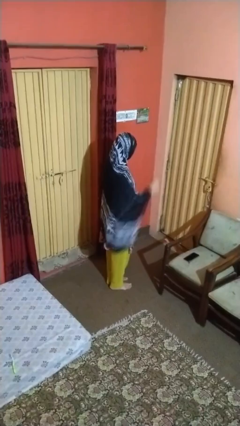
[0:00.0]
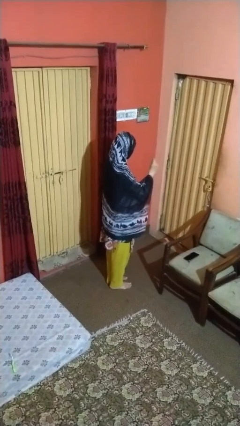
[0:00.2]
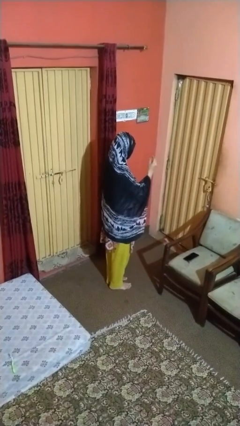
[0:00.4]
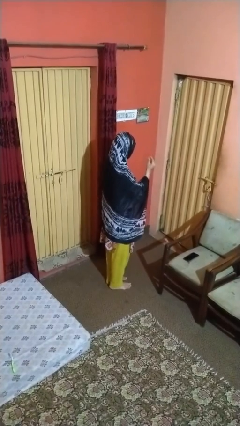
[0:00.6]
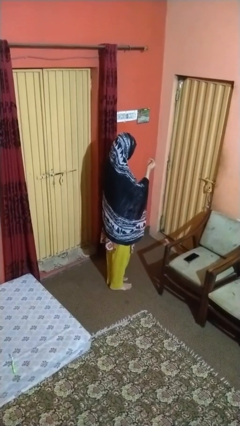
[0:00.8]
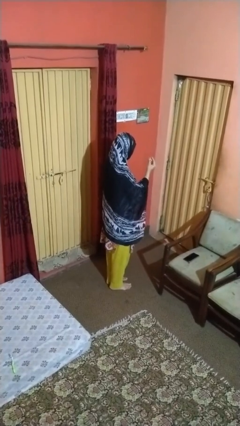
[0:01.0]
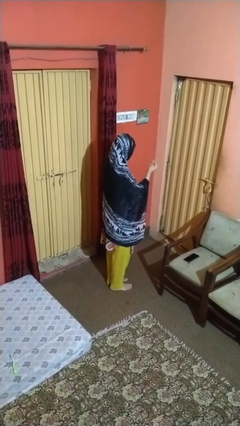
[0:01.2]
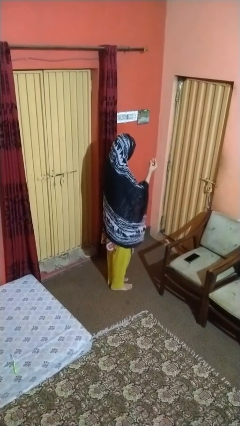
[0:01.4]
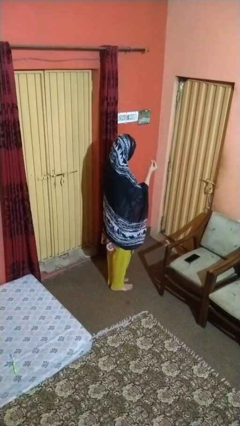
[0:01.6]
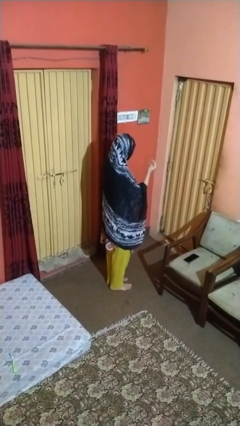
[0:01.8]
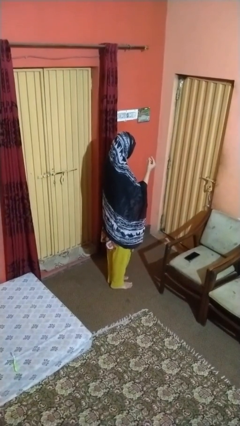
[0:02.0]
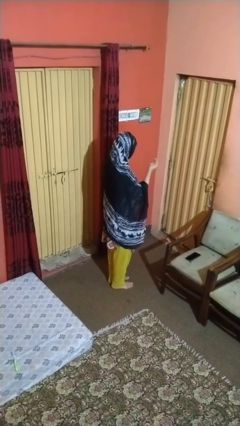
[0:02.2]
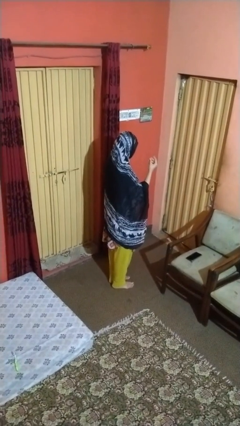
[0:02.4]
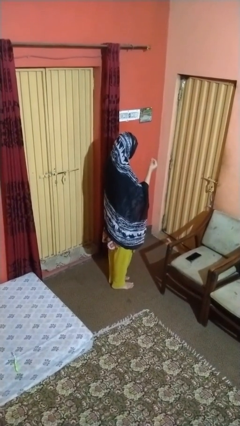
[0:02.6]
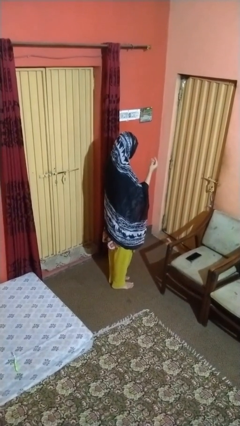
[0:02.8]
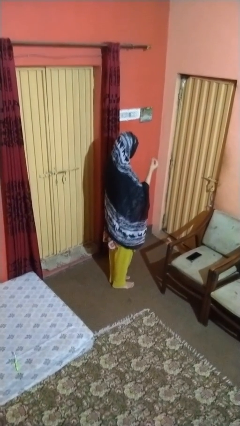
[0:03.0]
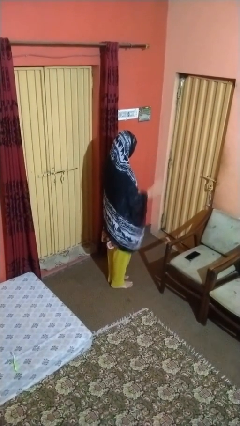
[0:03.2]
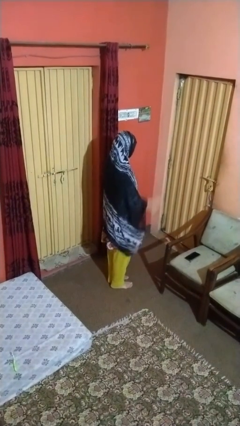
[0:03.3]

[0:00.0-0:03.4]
person snaps fingers

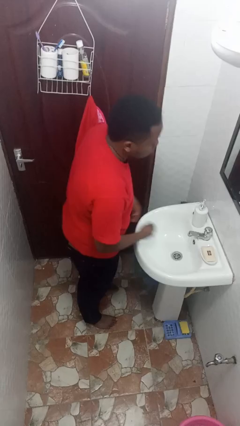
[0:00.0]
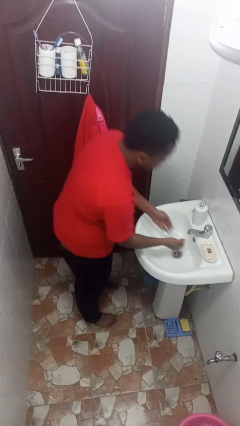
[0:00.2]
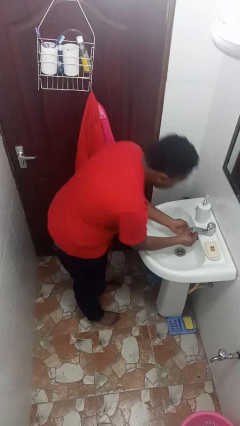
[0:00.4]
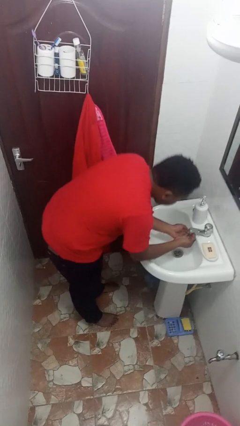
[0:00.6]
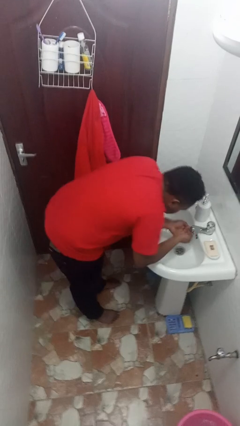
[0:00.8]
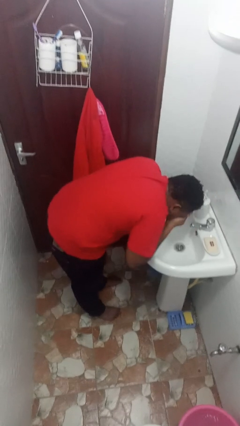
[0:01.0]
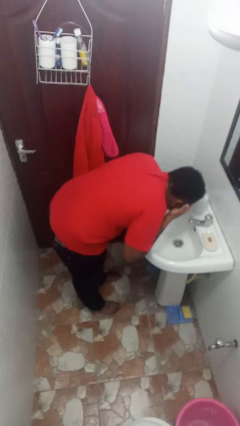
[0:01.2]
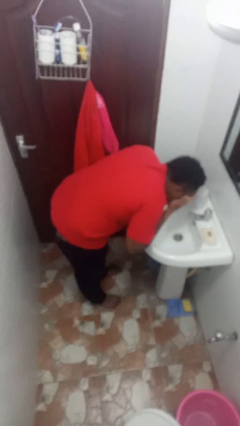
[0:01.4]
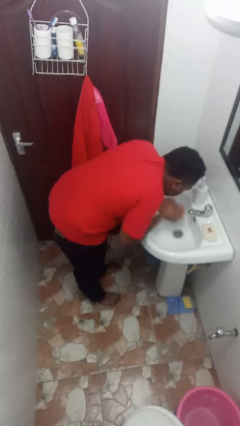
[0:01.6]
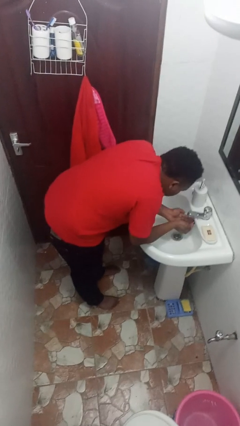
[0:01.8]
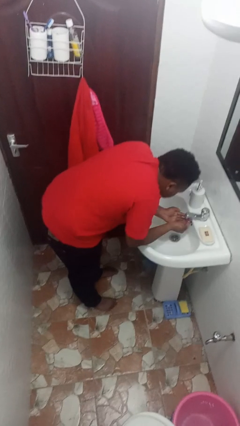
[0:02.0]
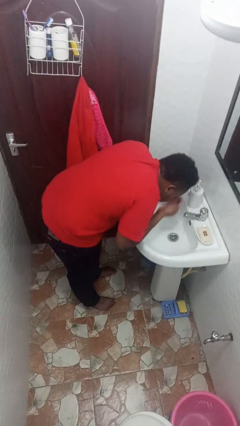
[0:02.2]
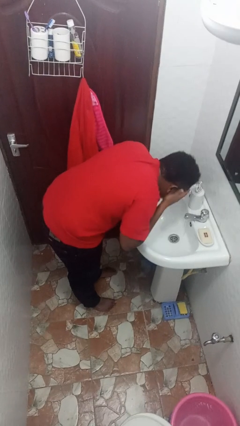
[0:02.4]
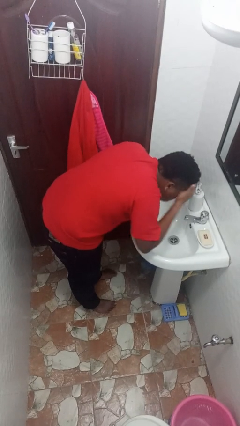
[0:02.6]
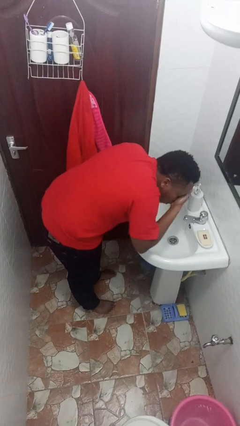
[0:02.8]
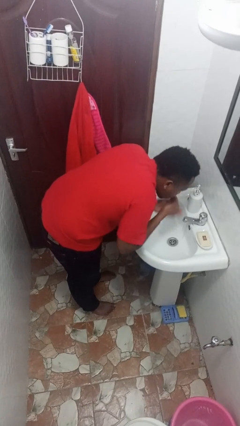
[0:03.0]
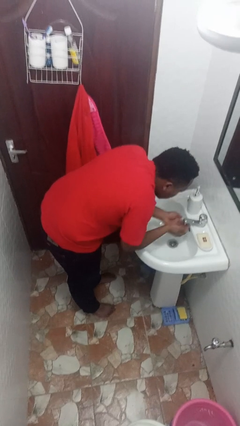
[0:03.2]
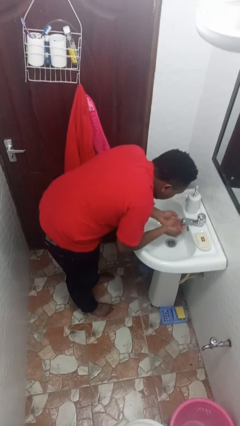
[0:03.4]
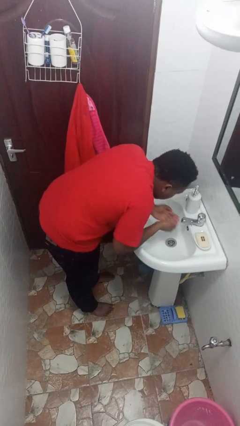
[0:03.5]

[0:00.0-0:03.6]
person washes face

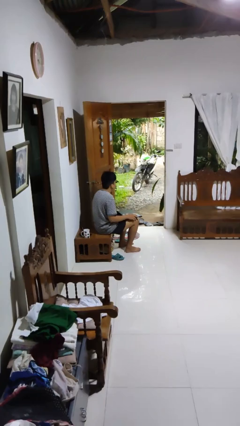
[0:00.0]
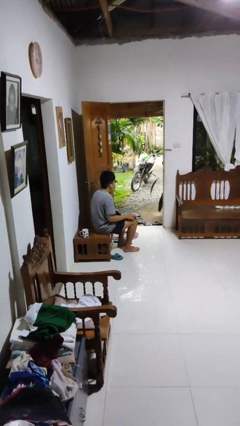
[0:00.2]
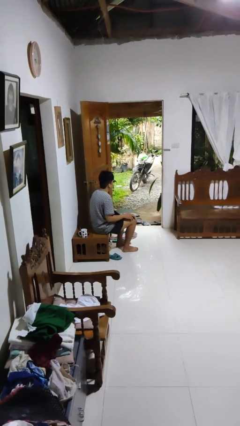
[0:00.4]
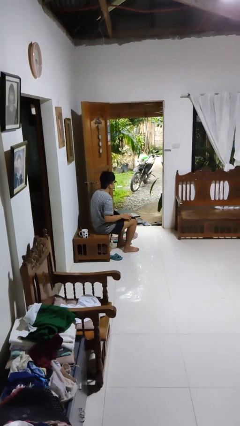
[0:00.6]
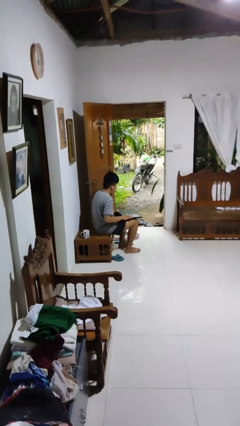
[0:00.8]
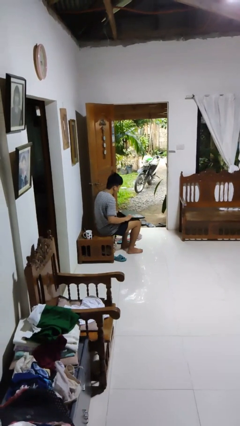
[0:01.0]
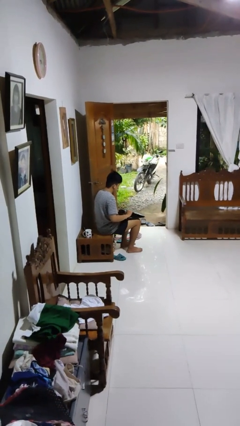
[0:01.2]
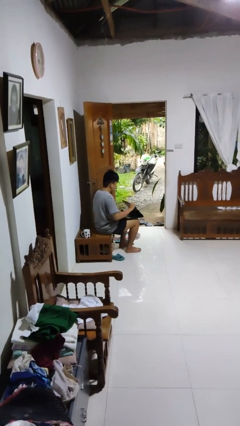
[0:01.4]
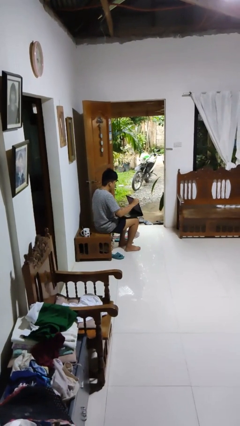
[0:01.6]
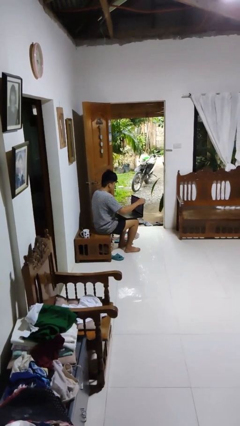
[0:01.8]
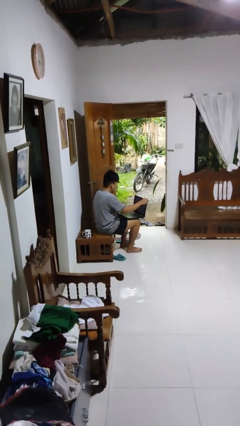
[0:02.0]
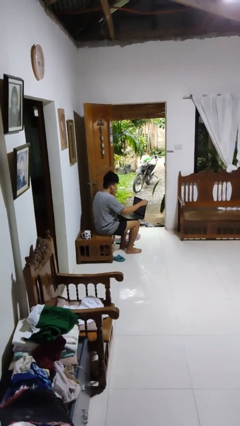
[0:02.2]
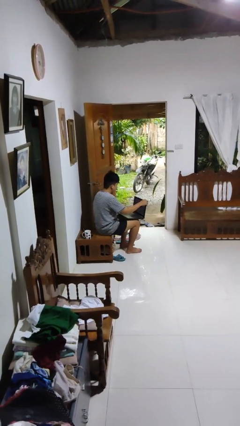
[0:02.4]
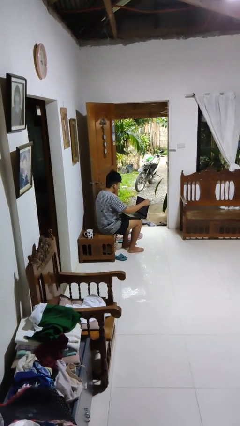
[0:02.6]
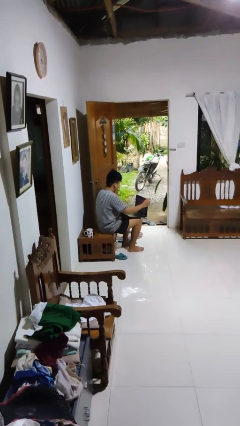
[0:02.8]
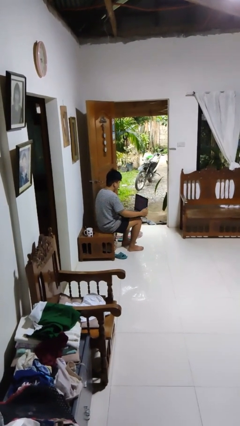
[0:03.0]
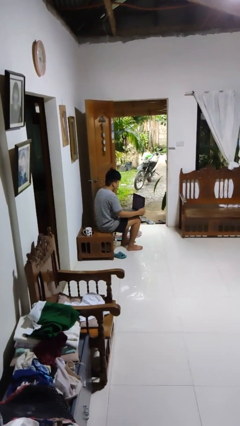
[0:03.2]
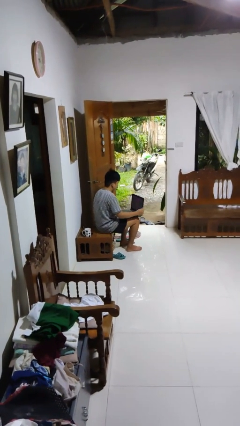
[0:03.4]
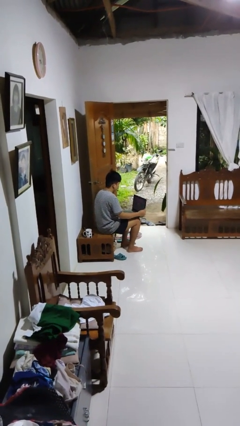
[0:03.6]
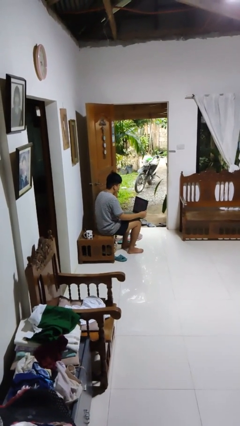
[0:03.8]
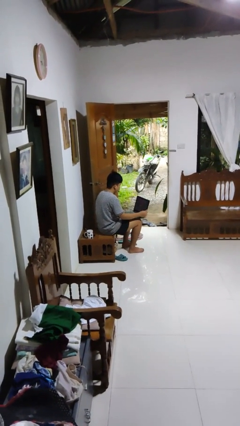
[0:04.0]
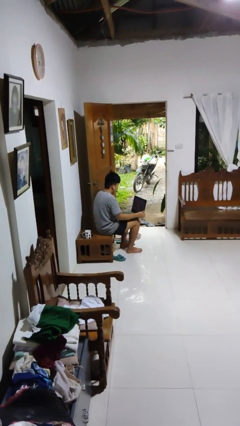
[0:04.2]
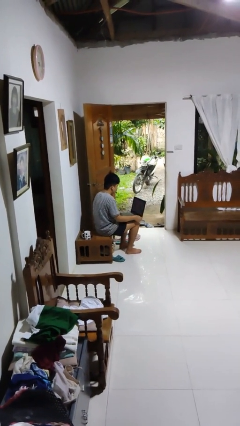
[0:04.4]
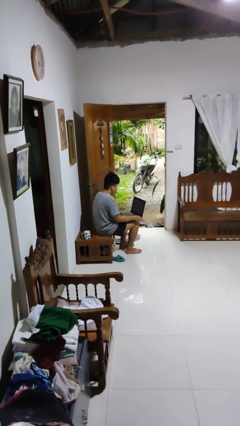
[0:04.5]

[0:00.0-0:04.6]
person opens laptop

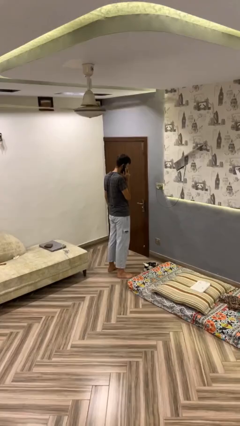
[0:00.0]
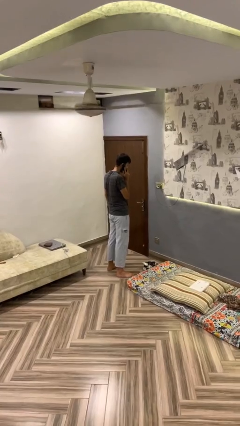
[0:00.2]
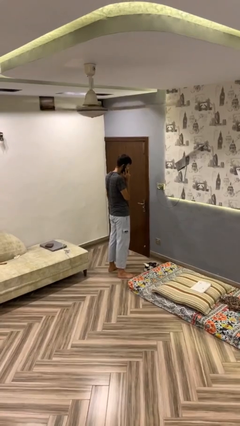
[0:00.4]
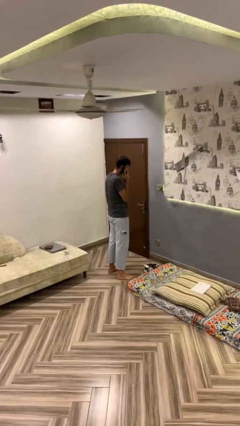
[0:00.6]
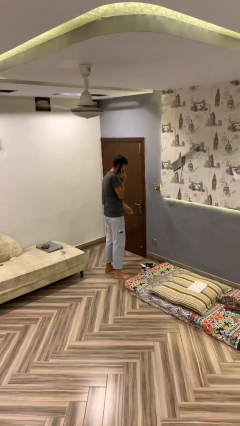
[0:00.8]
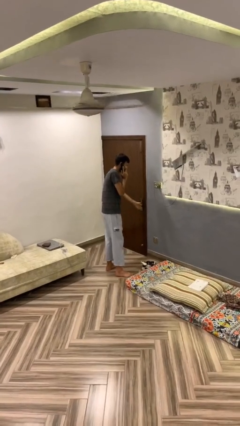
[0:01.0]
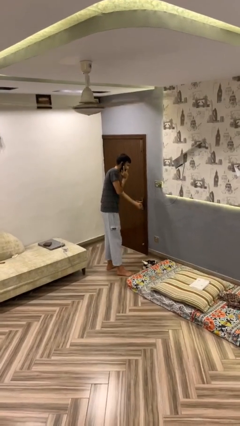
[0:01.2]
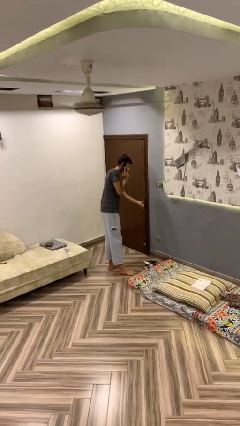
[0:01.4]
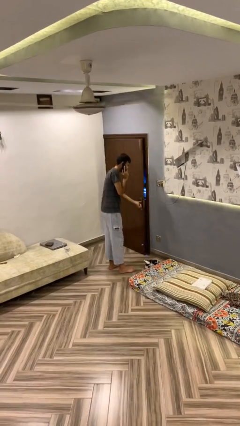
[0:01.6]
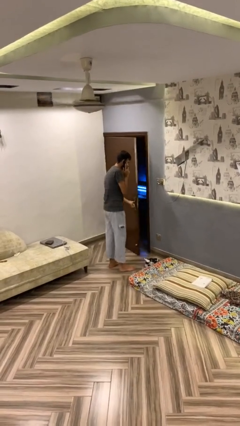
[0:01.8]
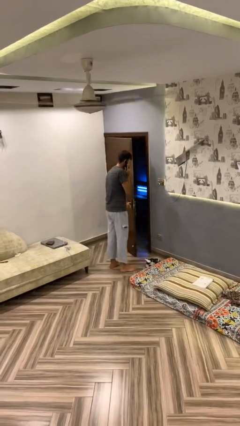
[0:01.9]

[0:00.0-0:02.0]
person opens facility door

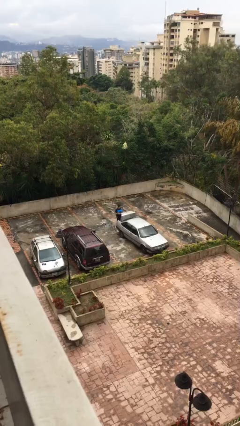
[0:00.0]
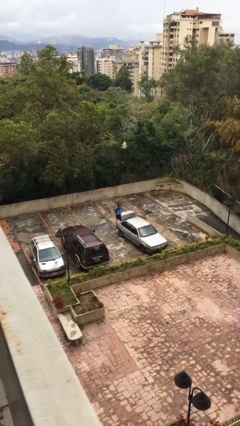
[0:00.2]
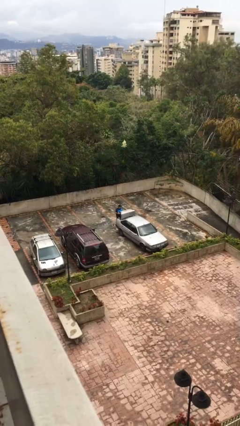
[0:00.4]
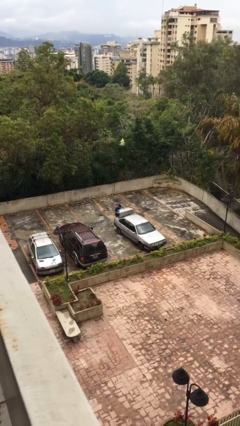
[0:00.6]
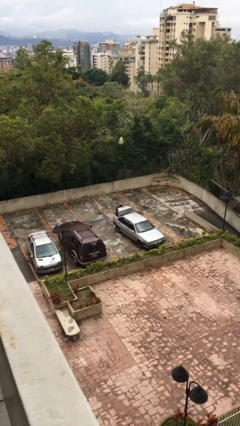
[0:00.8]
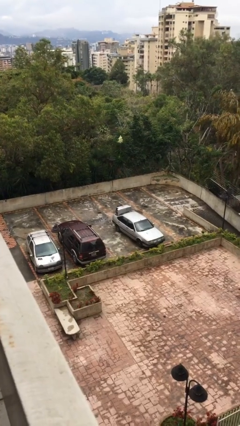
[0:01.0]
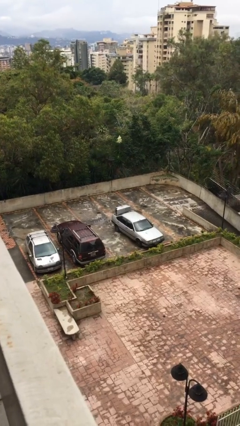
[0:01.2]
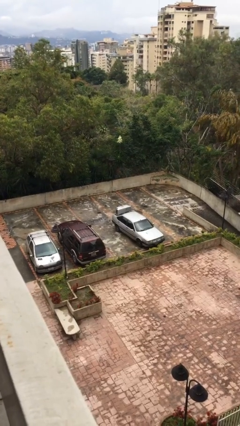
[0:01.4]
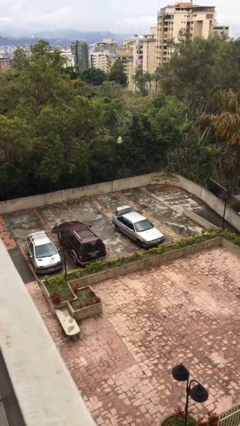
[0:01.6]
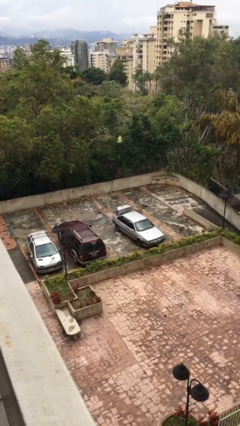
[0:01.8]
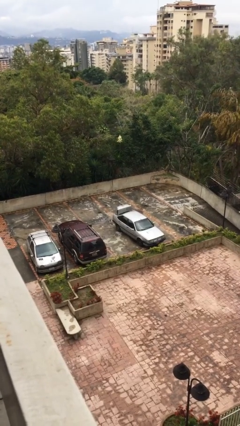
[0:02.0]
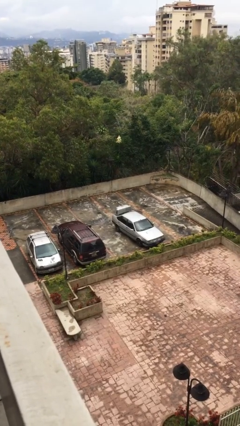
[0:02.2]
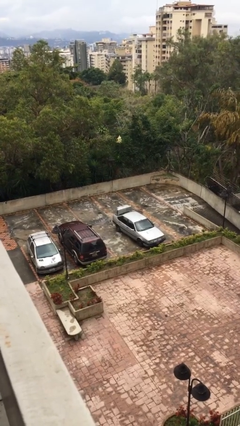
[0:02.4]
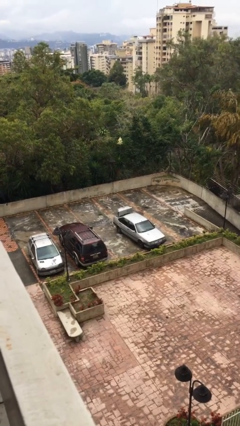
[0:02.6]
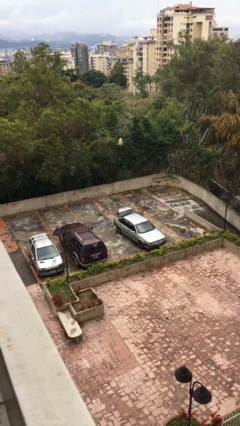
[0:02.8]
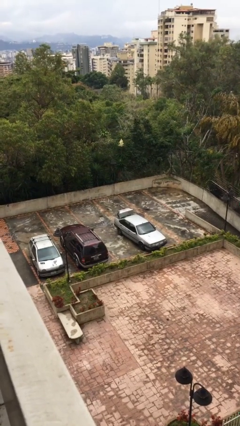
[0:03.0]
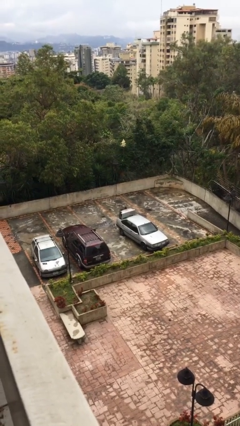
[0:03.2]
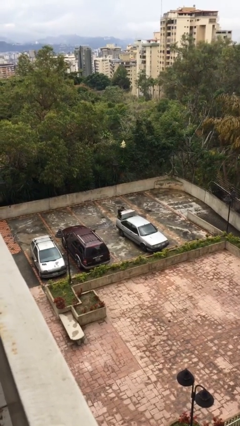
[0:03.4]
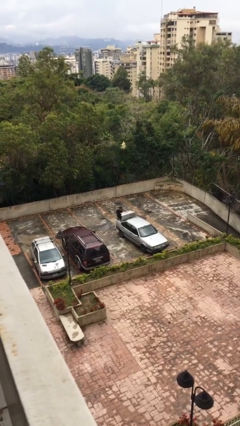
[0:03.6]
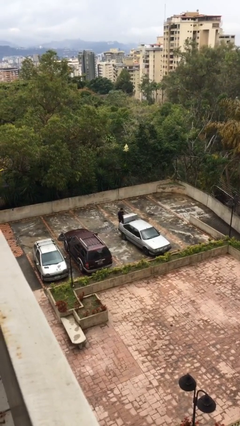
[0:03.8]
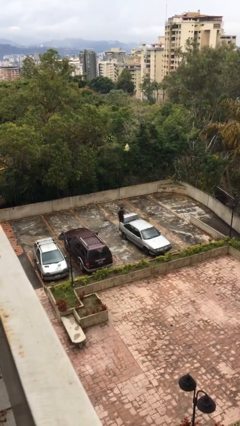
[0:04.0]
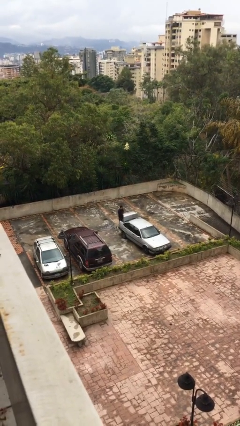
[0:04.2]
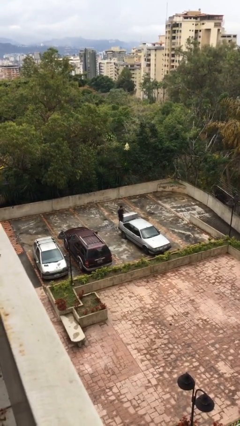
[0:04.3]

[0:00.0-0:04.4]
person loads car
